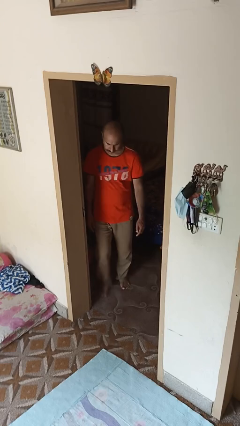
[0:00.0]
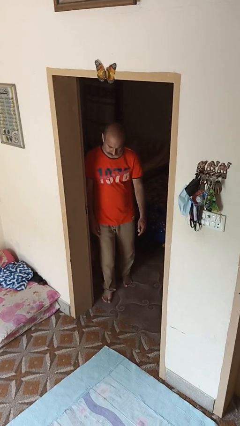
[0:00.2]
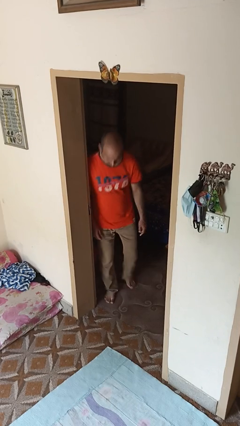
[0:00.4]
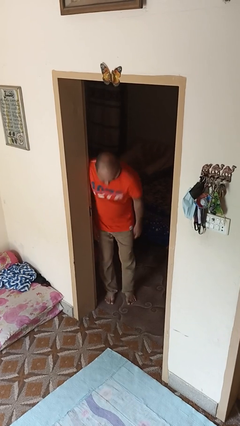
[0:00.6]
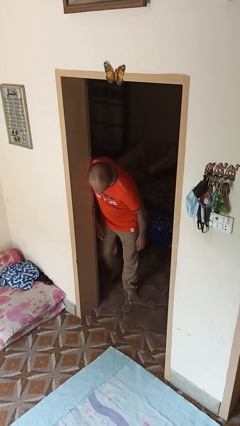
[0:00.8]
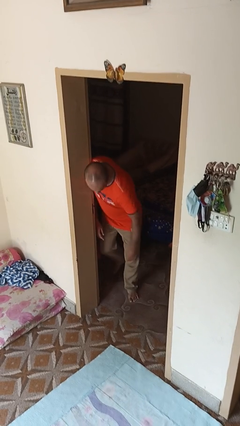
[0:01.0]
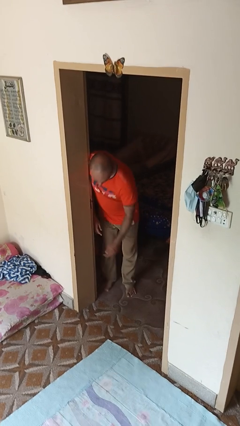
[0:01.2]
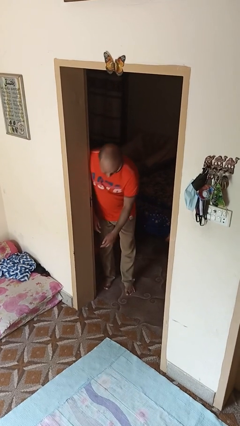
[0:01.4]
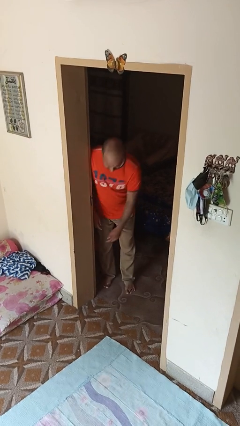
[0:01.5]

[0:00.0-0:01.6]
person bumps into wall

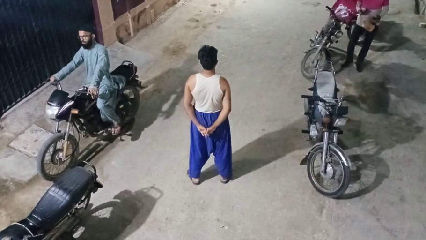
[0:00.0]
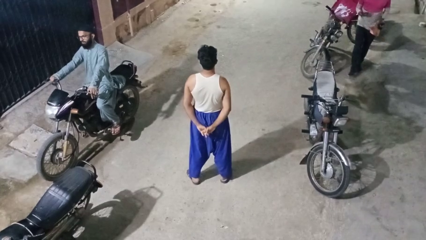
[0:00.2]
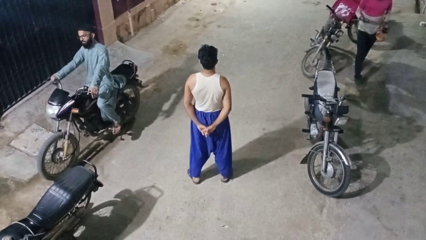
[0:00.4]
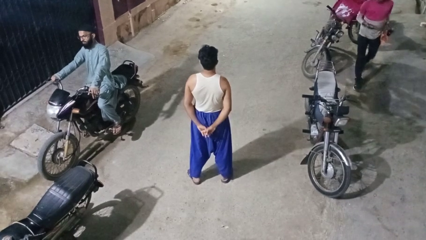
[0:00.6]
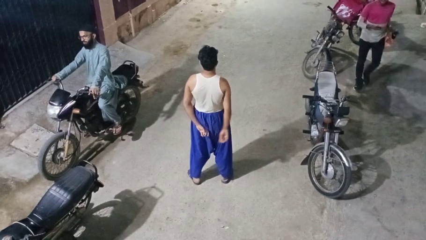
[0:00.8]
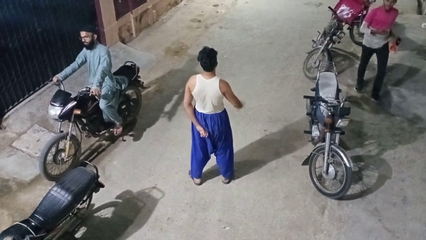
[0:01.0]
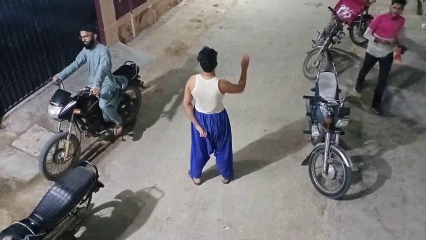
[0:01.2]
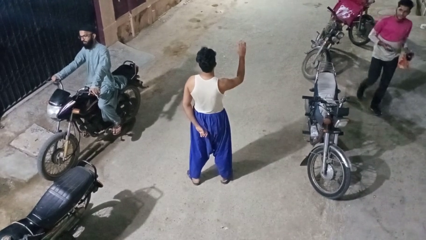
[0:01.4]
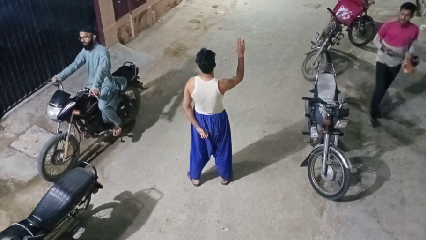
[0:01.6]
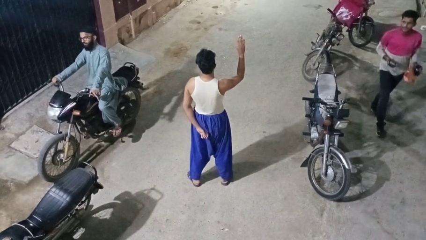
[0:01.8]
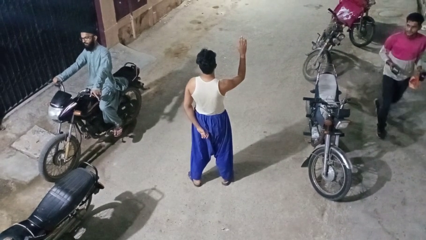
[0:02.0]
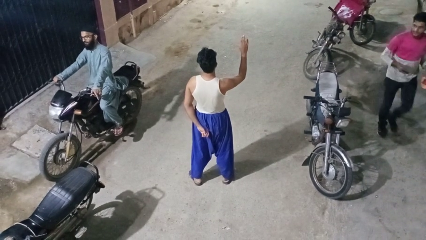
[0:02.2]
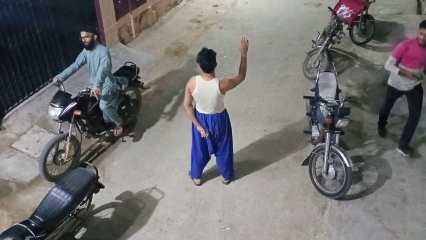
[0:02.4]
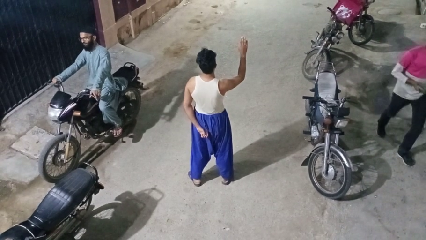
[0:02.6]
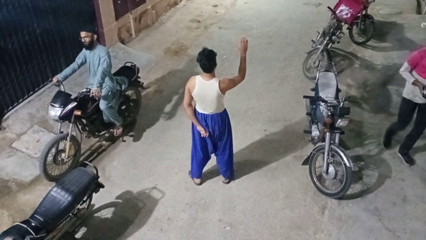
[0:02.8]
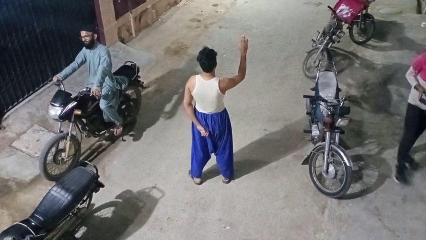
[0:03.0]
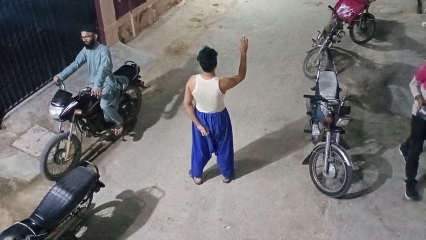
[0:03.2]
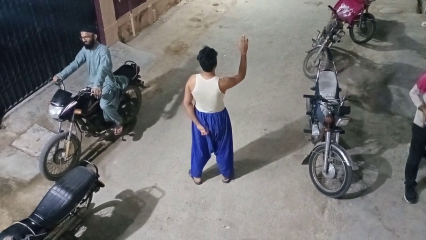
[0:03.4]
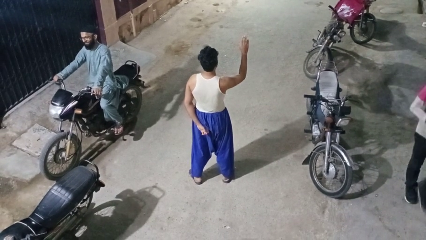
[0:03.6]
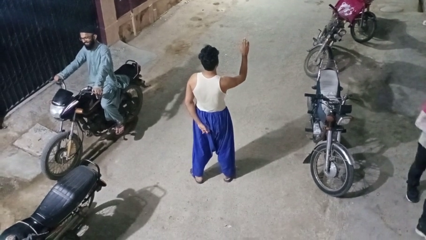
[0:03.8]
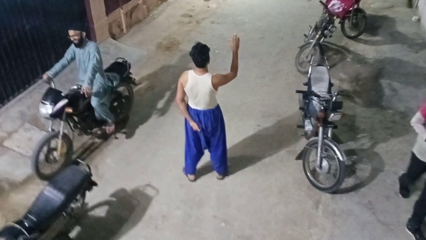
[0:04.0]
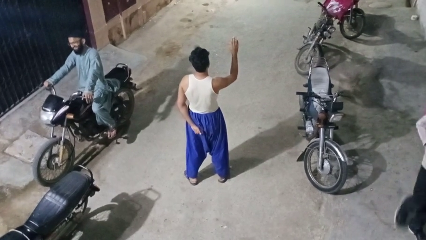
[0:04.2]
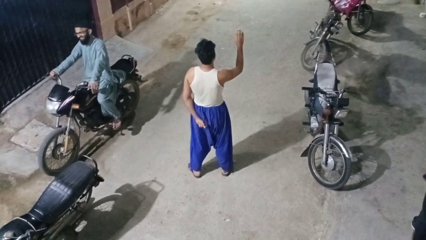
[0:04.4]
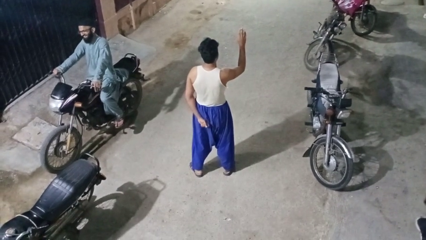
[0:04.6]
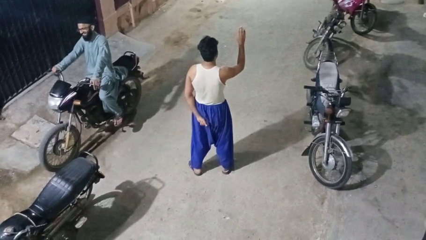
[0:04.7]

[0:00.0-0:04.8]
person points at person

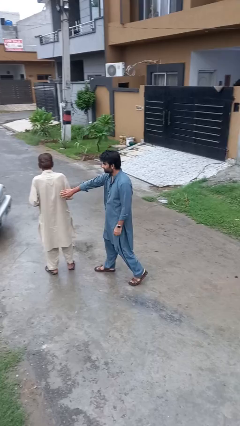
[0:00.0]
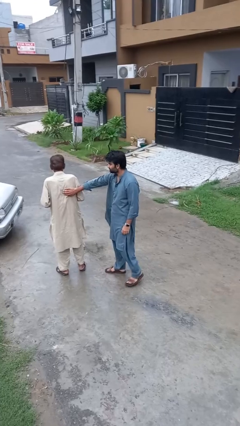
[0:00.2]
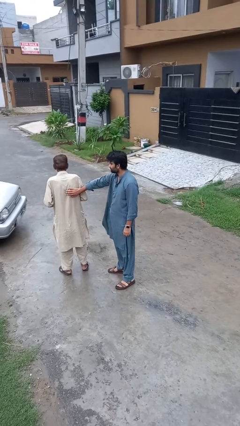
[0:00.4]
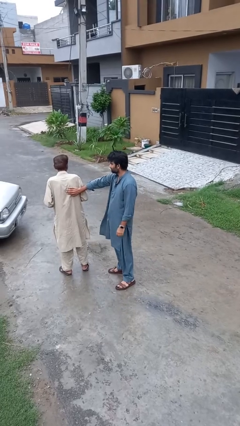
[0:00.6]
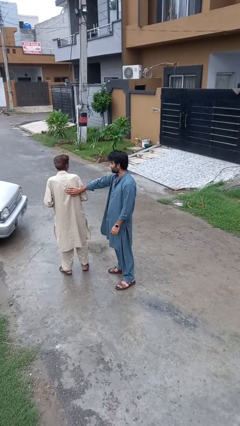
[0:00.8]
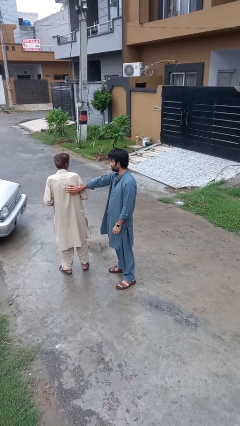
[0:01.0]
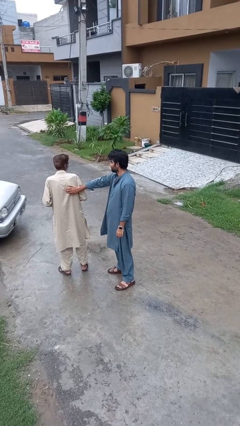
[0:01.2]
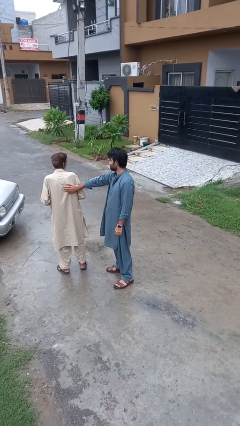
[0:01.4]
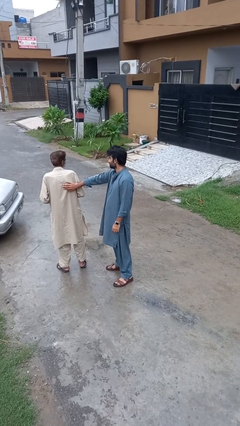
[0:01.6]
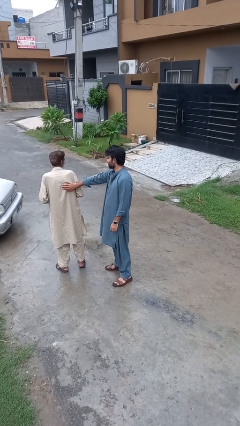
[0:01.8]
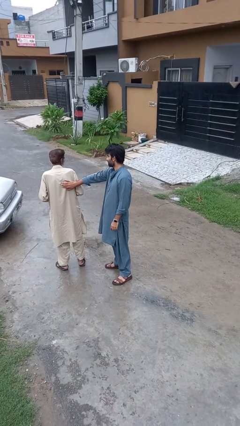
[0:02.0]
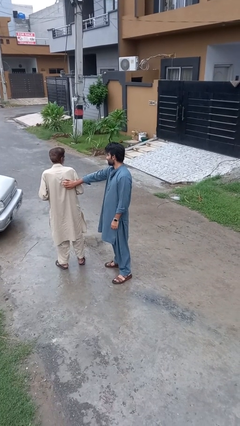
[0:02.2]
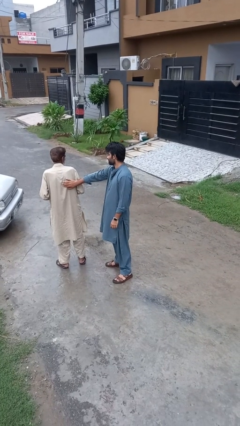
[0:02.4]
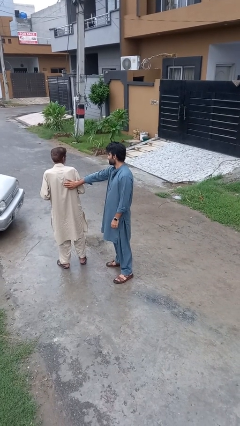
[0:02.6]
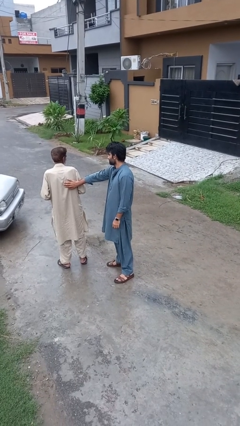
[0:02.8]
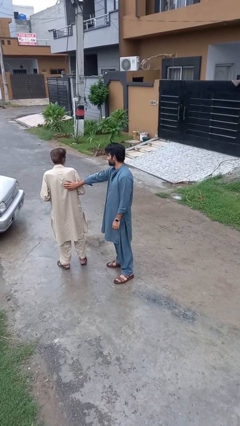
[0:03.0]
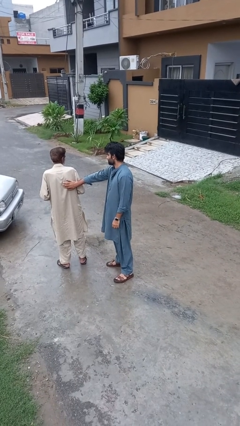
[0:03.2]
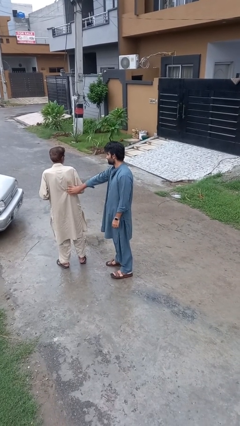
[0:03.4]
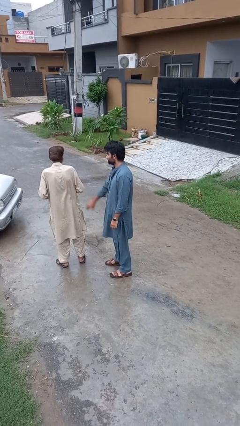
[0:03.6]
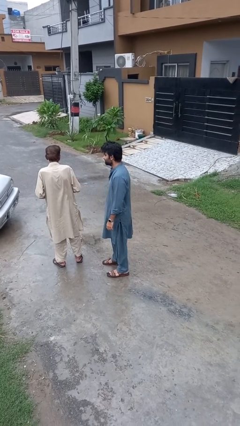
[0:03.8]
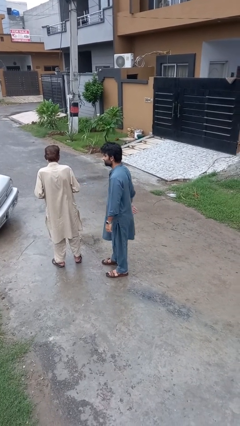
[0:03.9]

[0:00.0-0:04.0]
person touches back of person

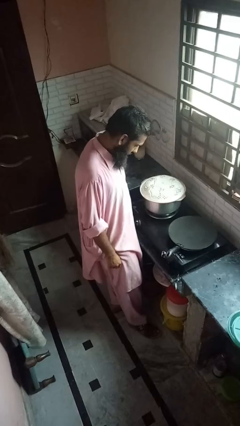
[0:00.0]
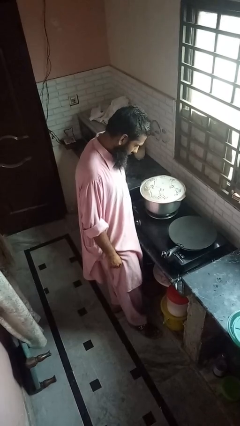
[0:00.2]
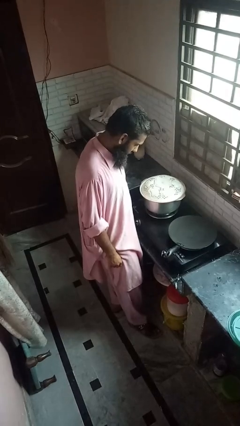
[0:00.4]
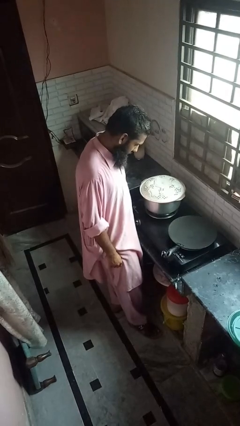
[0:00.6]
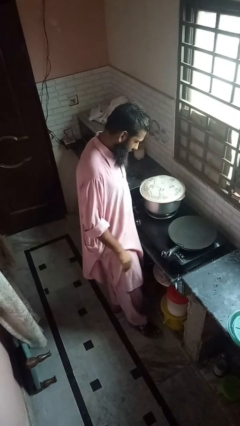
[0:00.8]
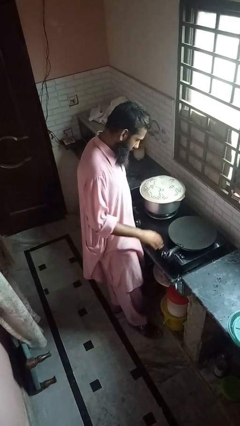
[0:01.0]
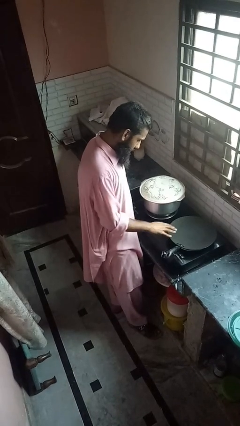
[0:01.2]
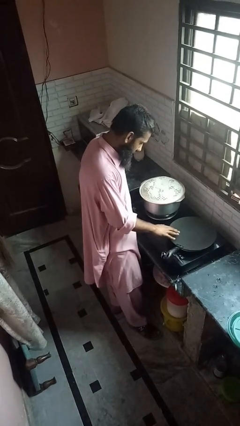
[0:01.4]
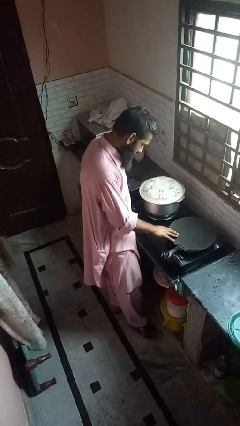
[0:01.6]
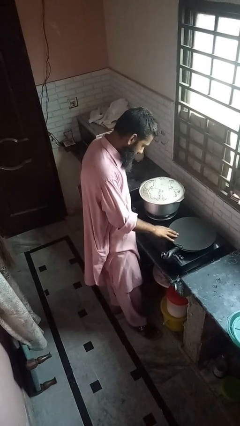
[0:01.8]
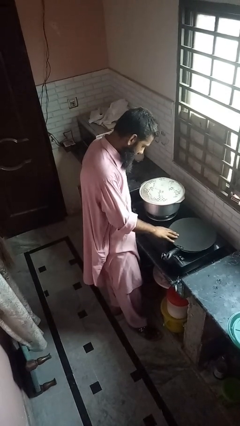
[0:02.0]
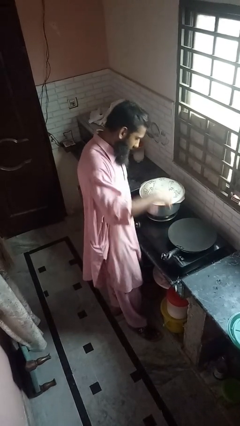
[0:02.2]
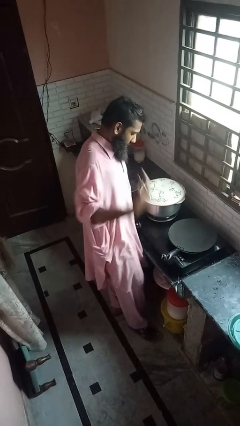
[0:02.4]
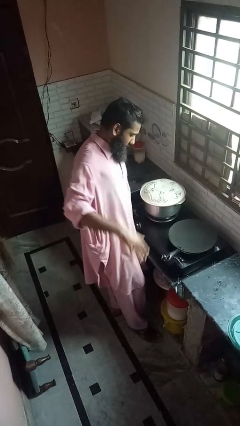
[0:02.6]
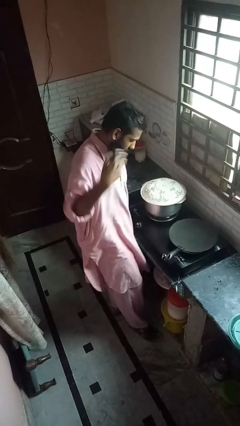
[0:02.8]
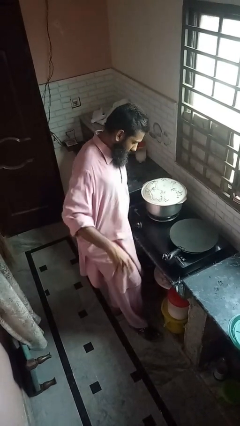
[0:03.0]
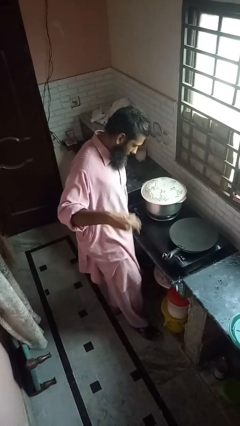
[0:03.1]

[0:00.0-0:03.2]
person burns hand

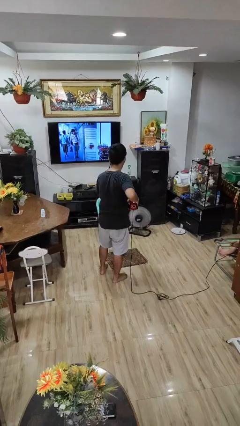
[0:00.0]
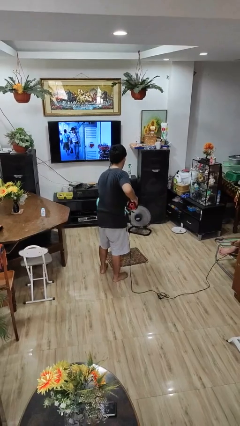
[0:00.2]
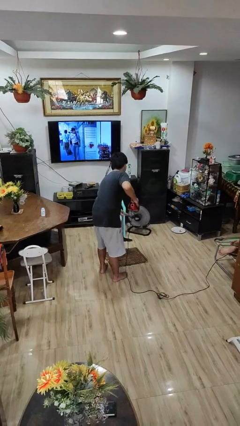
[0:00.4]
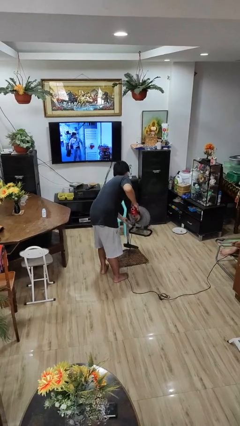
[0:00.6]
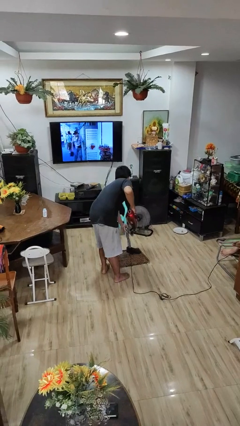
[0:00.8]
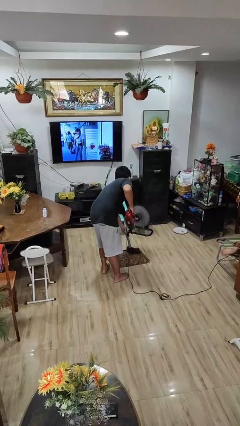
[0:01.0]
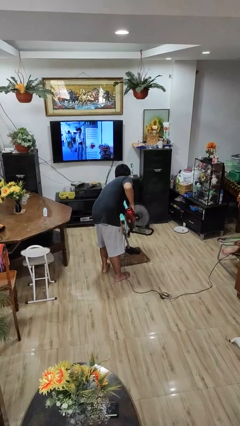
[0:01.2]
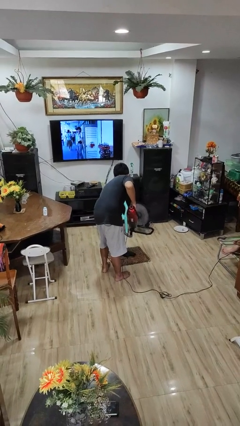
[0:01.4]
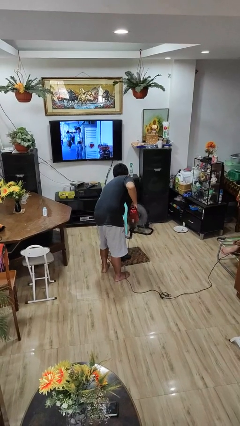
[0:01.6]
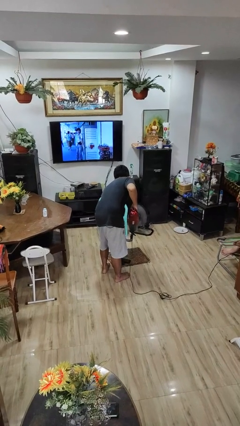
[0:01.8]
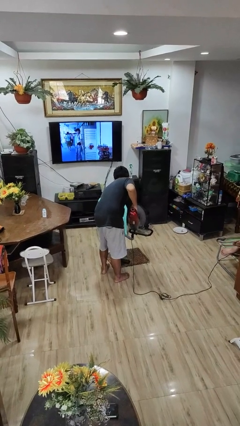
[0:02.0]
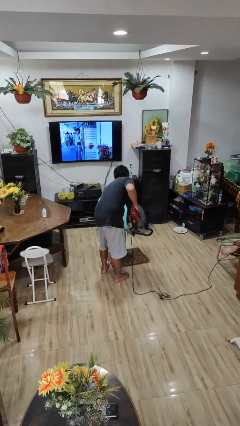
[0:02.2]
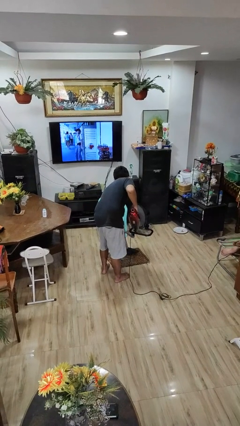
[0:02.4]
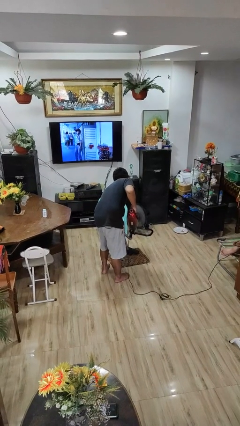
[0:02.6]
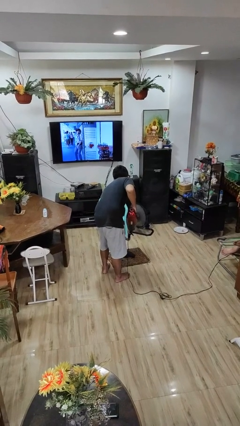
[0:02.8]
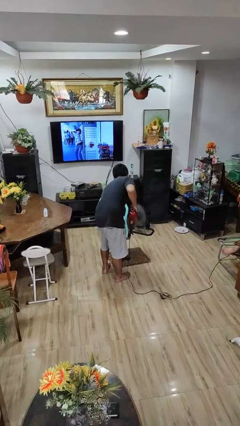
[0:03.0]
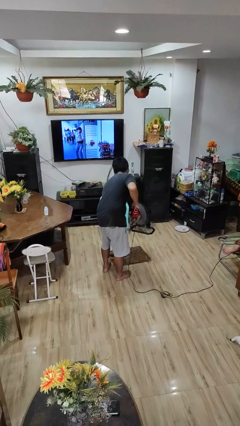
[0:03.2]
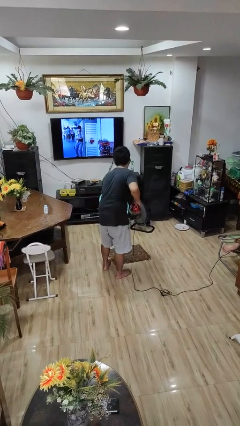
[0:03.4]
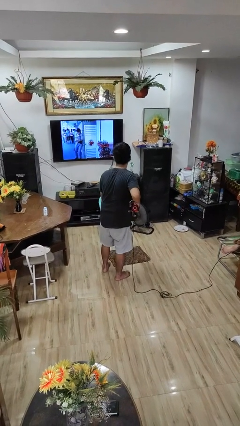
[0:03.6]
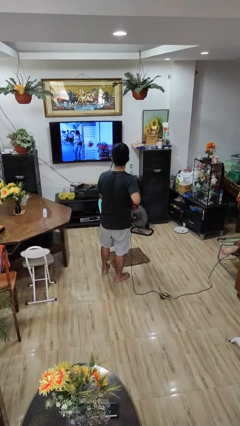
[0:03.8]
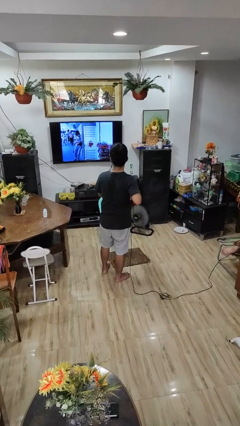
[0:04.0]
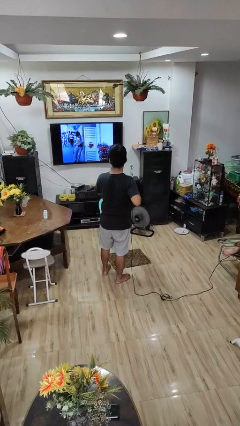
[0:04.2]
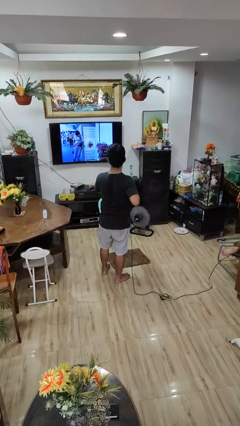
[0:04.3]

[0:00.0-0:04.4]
person vacuums carpet
